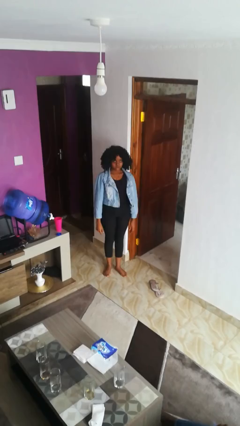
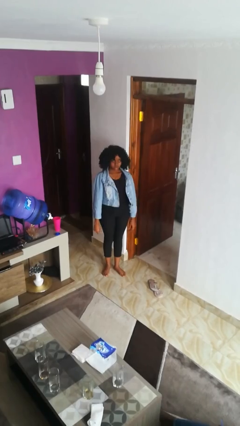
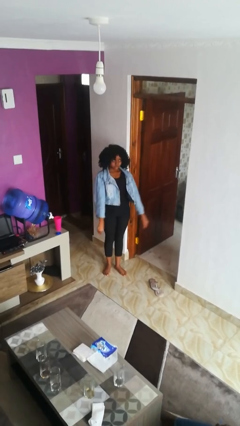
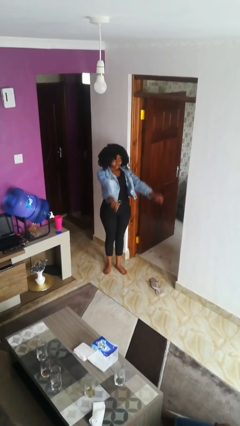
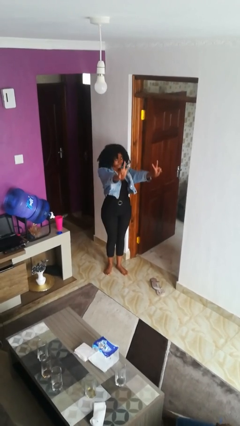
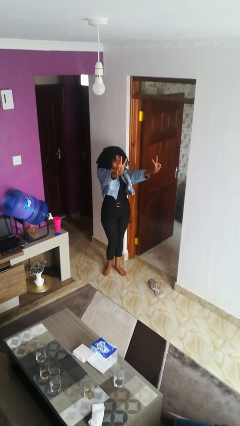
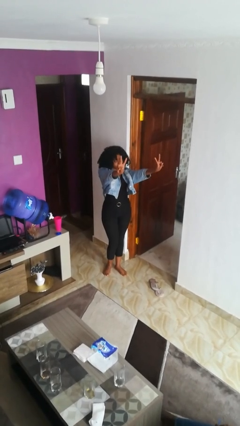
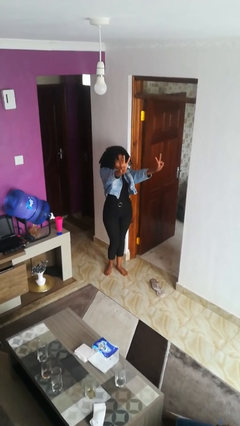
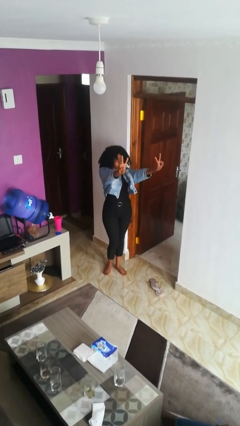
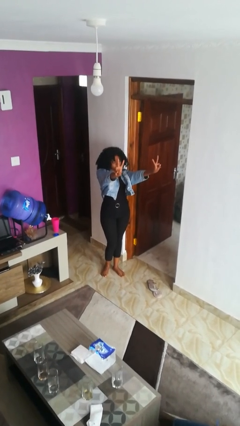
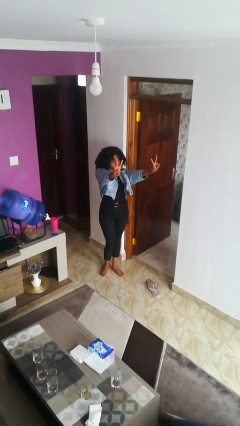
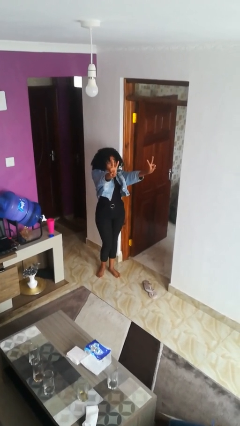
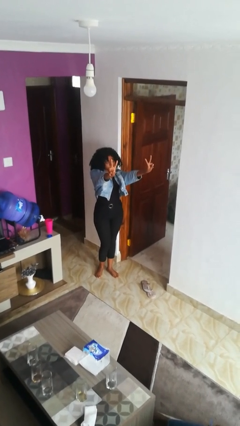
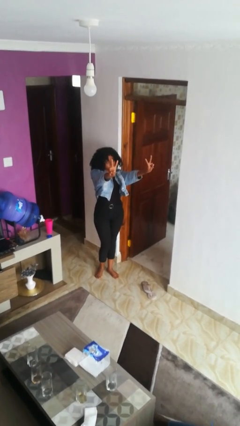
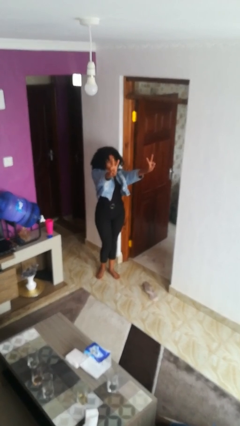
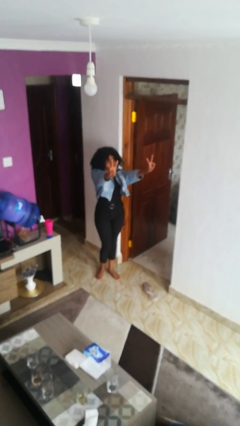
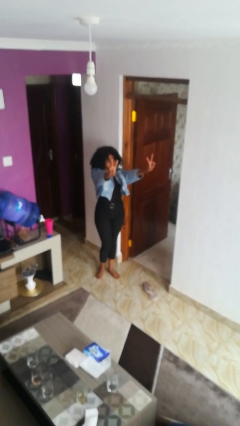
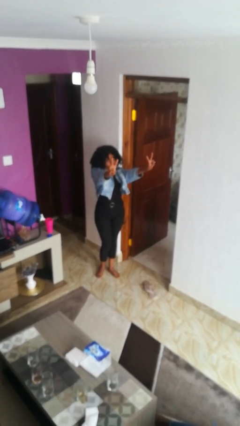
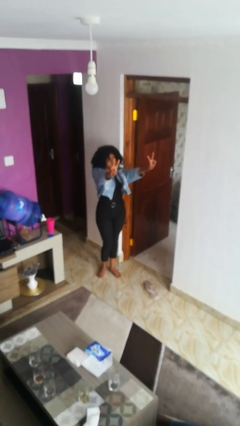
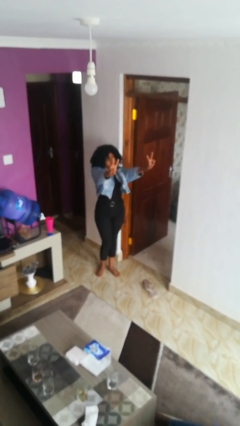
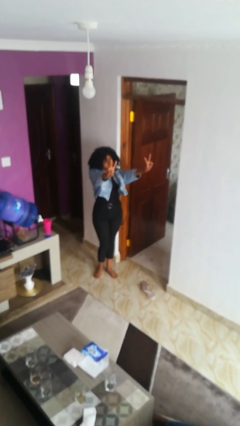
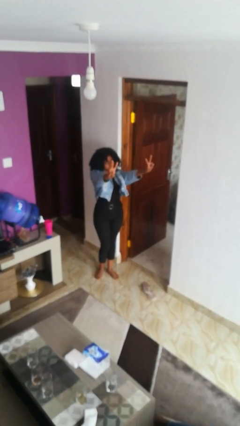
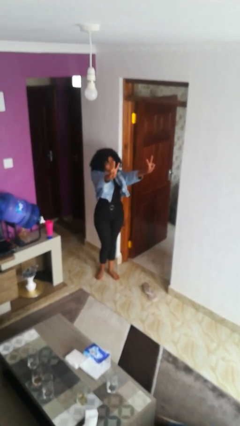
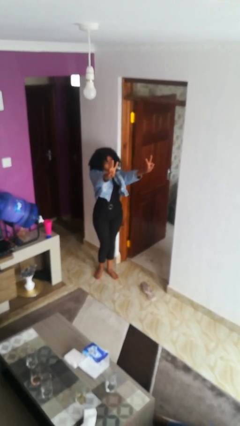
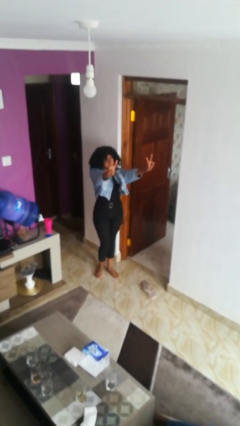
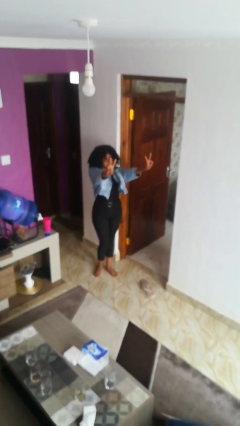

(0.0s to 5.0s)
person gestures peace

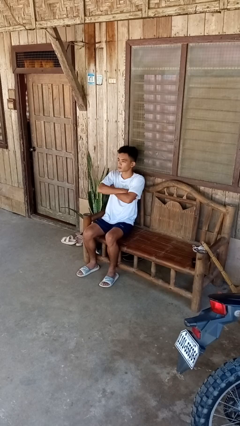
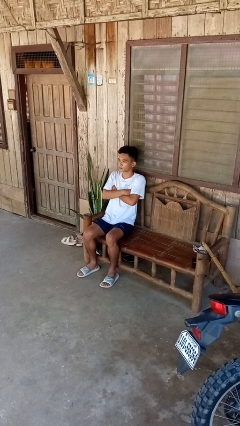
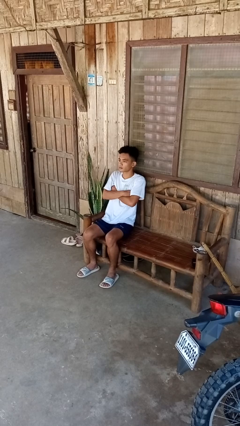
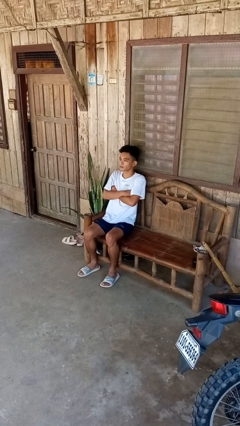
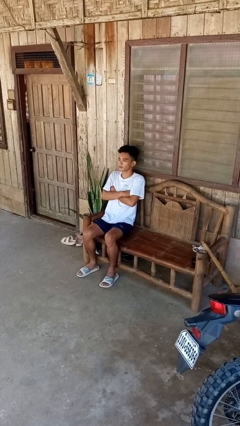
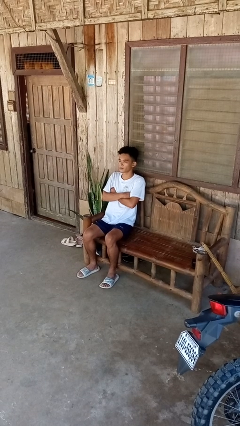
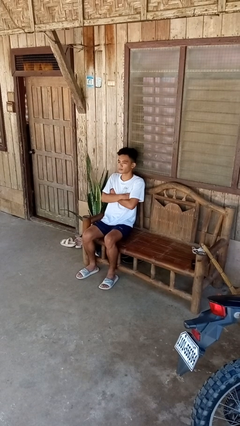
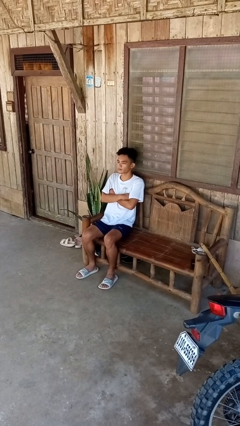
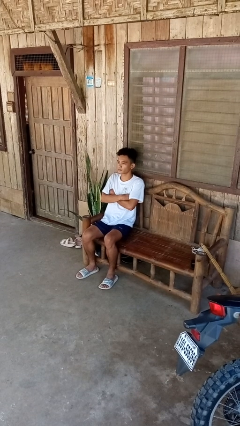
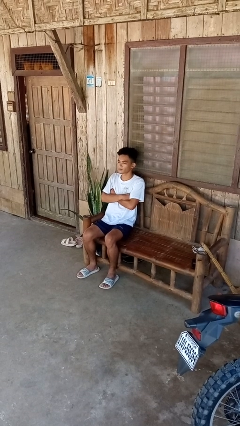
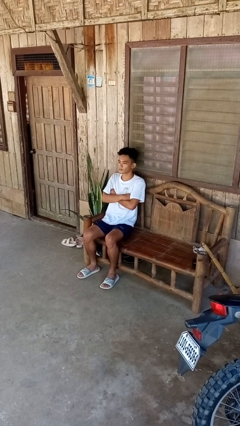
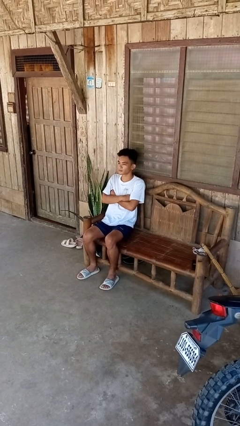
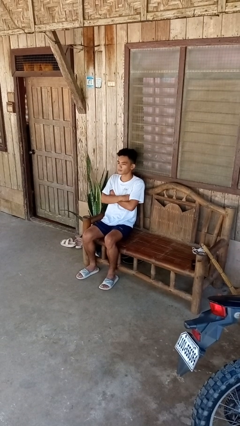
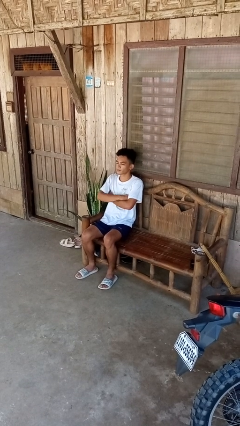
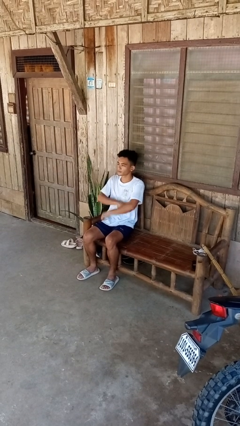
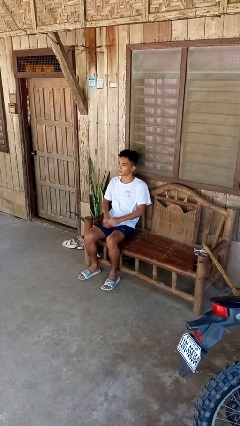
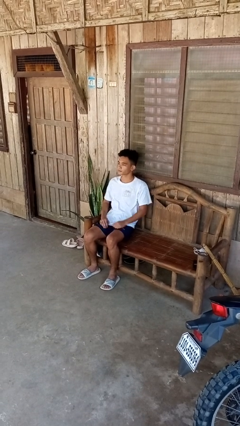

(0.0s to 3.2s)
person crosses arms

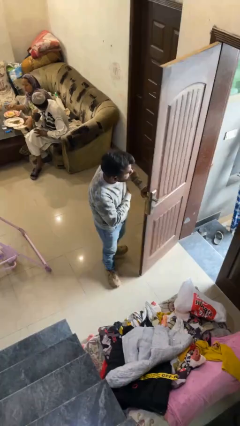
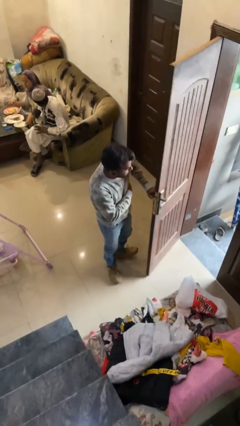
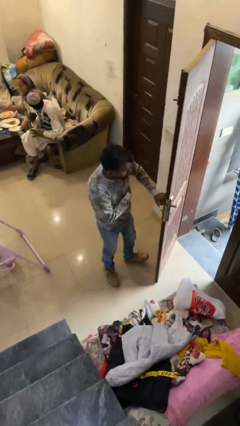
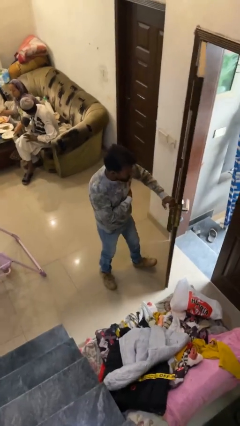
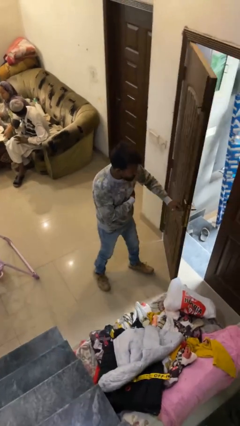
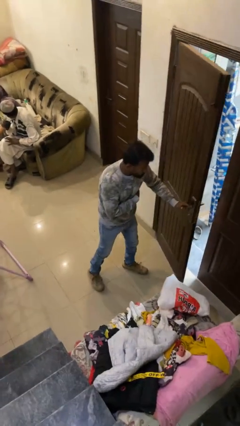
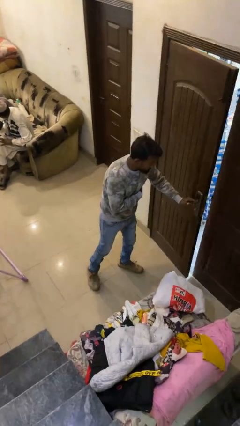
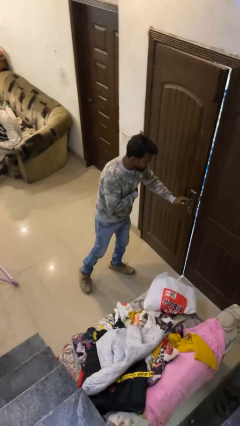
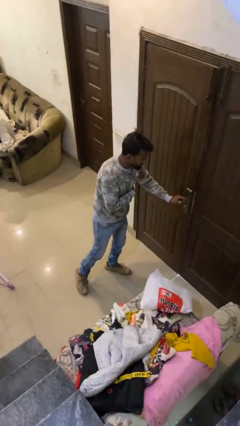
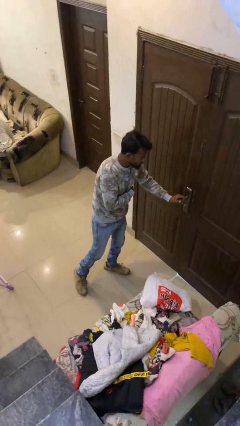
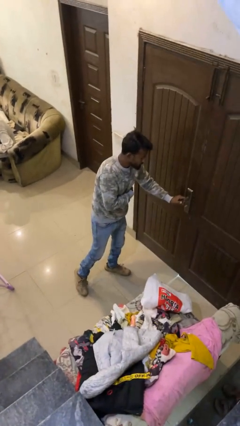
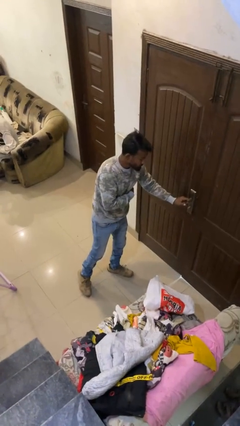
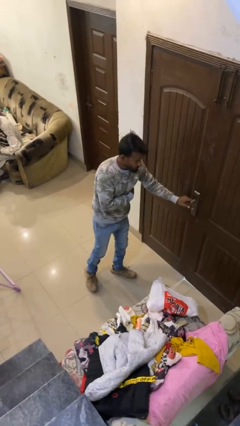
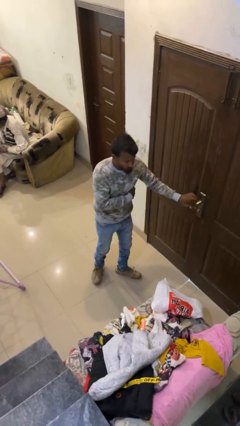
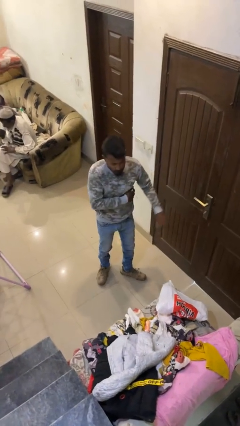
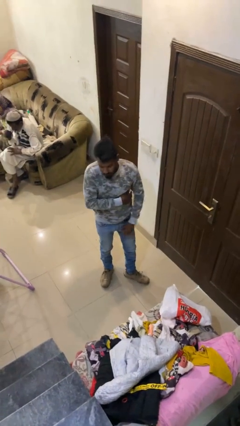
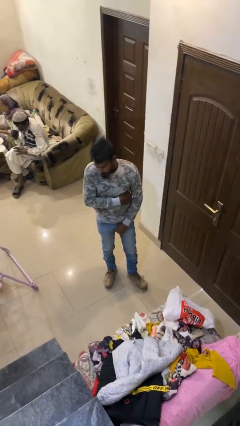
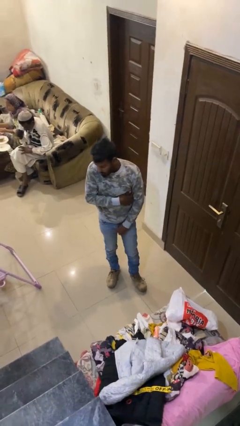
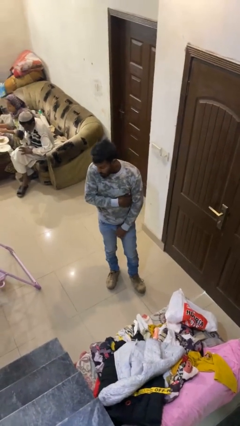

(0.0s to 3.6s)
person closes facility door

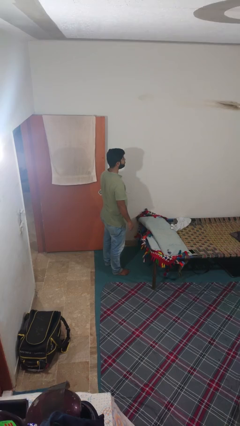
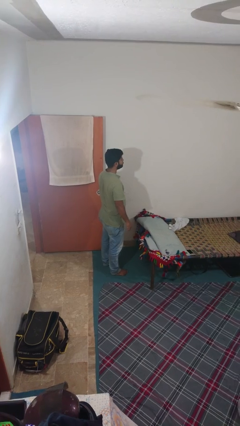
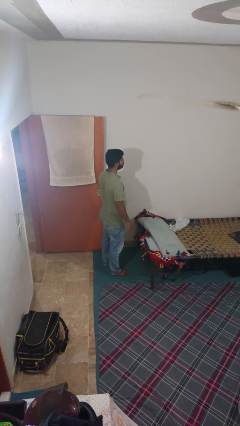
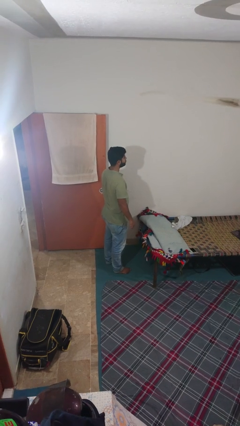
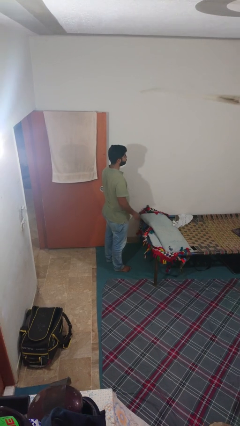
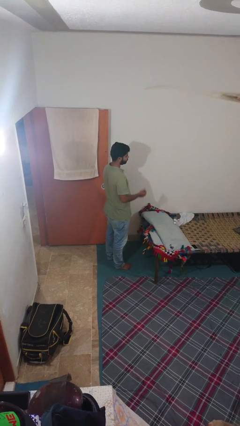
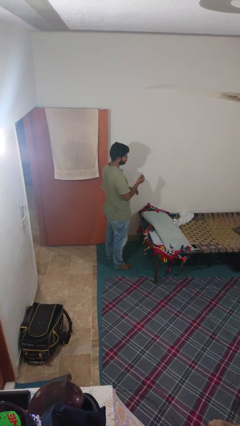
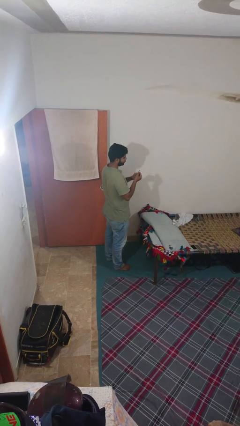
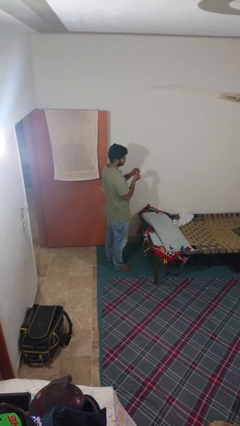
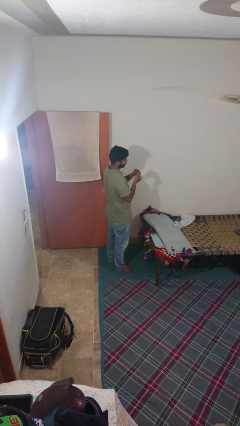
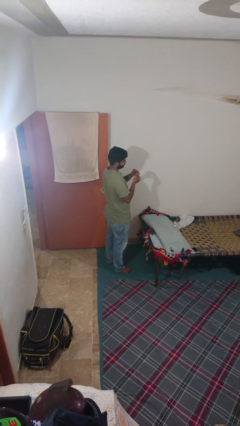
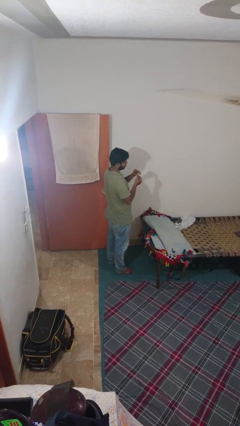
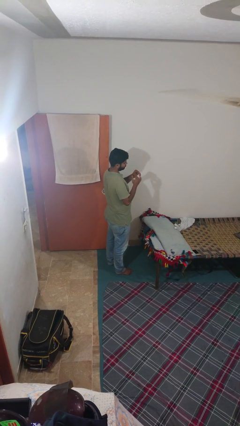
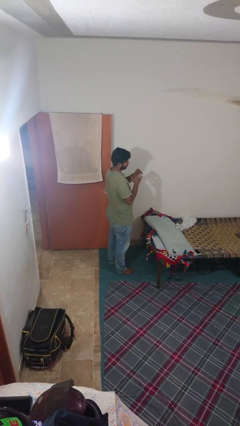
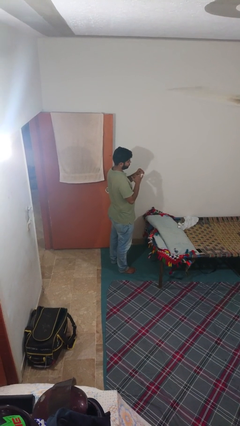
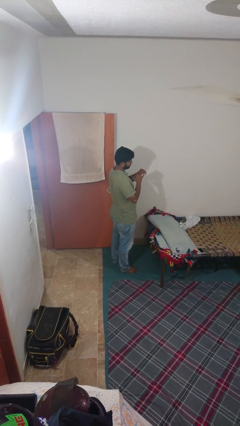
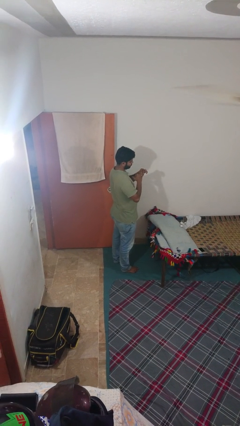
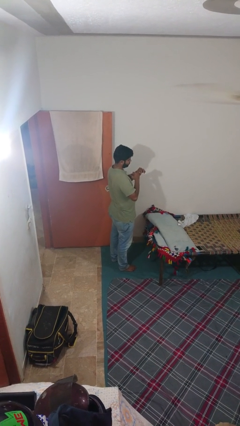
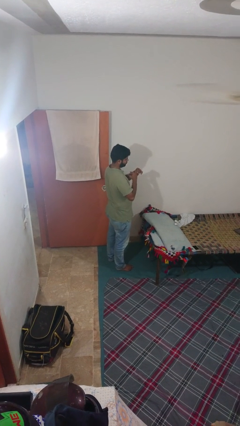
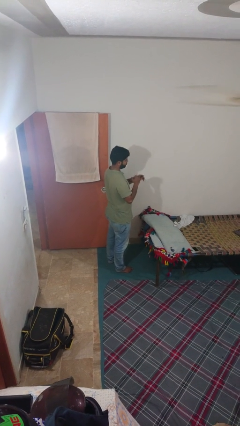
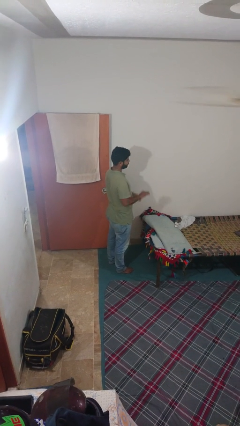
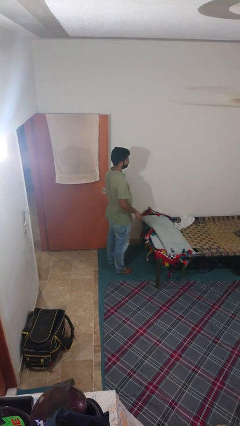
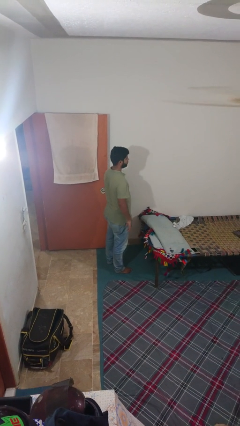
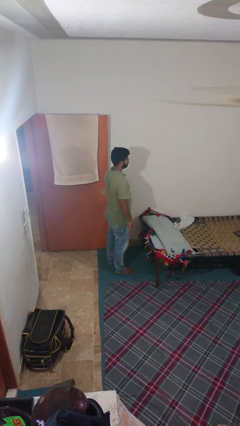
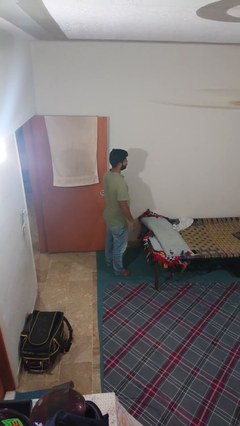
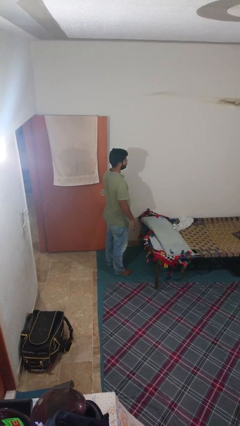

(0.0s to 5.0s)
person puts on ring

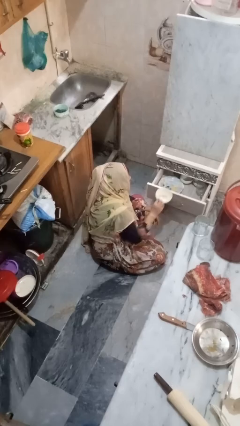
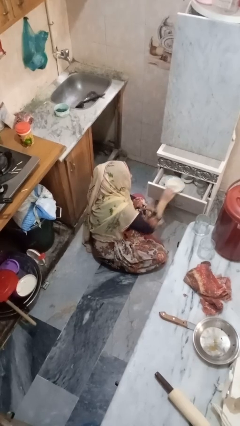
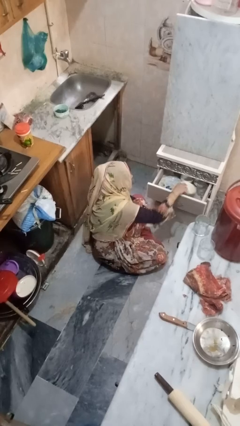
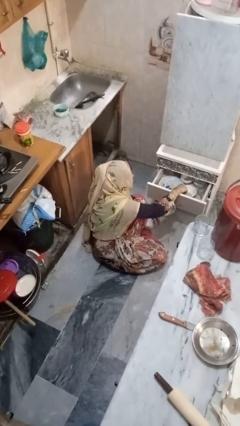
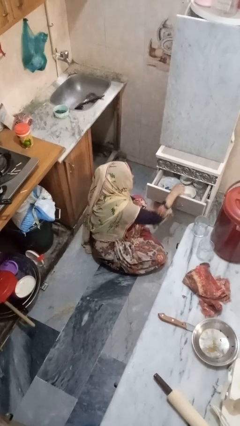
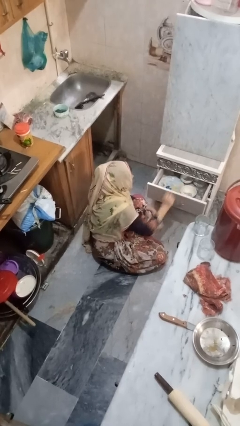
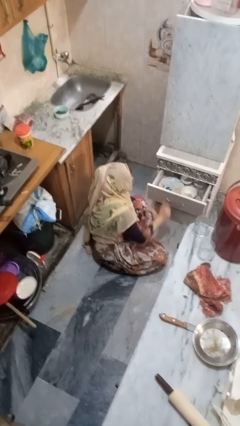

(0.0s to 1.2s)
person puts object into kitchen drawer
